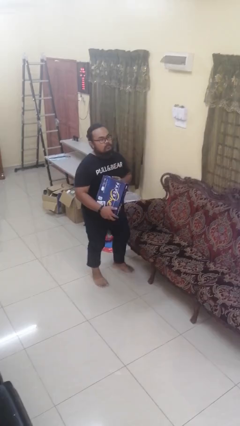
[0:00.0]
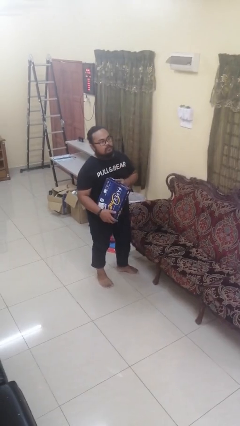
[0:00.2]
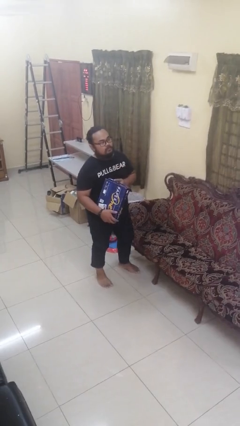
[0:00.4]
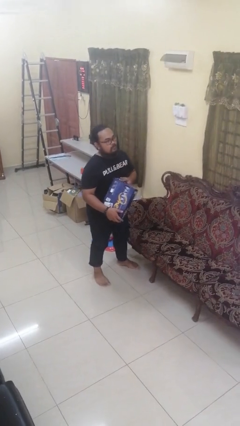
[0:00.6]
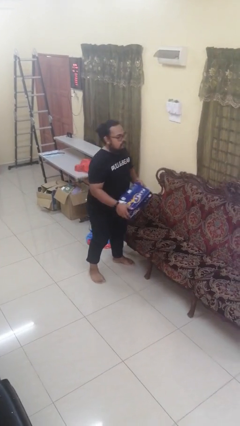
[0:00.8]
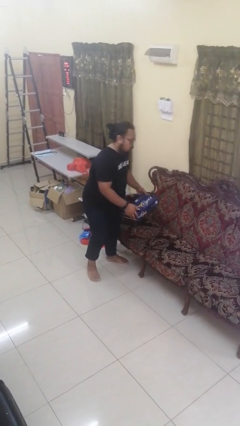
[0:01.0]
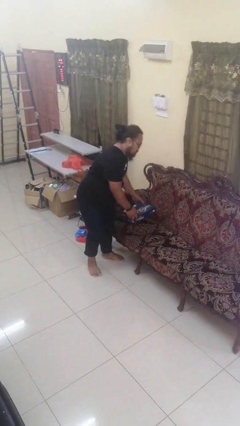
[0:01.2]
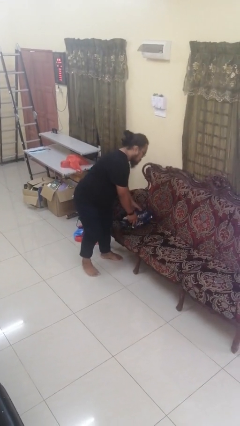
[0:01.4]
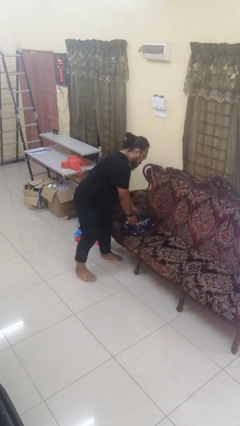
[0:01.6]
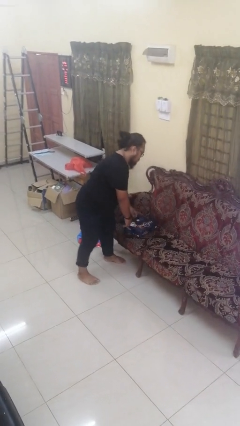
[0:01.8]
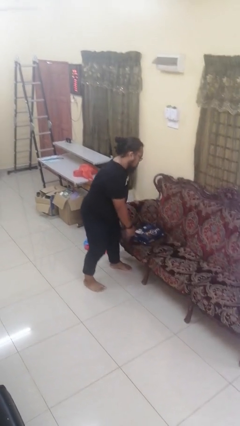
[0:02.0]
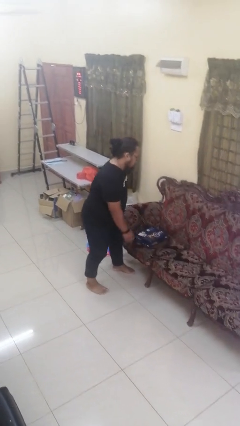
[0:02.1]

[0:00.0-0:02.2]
person puts down object on couch

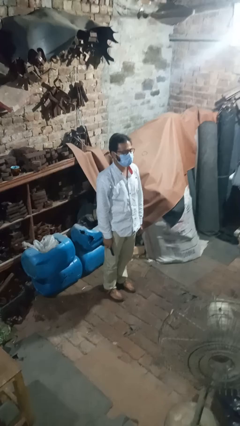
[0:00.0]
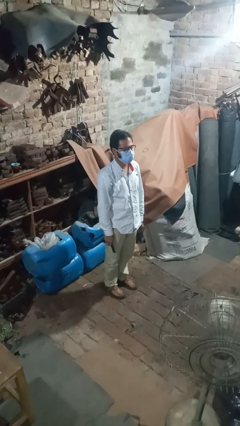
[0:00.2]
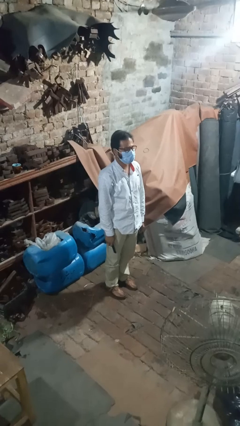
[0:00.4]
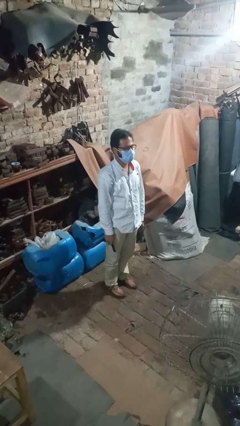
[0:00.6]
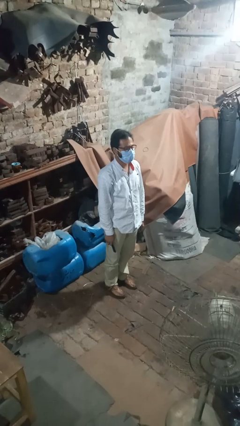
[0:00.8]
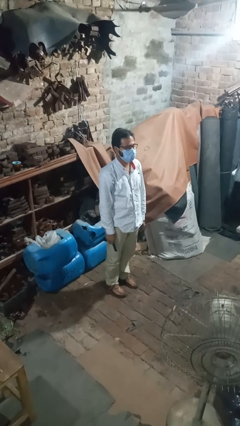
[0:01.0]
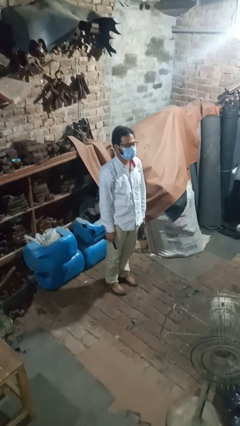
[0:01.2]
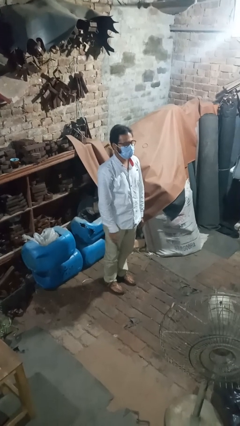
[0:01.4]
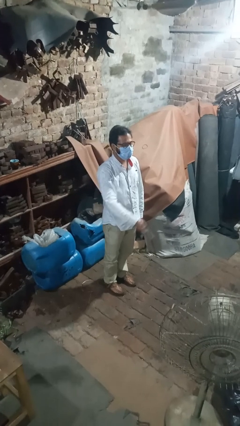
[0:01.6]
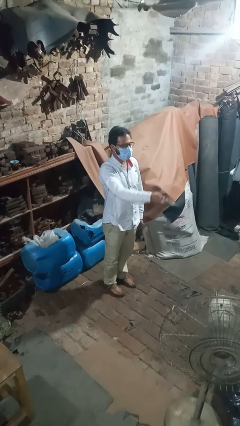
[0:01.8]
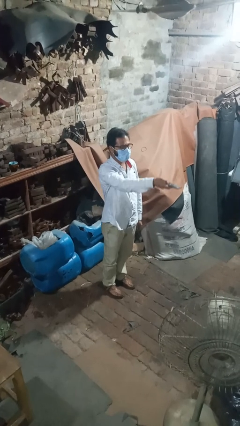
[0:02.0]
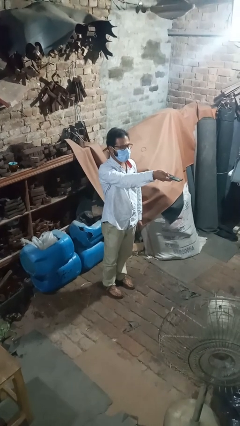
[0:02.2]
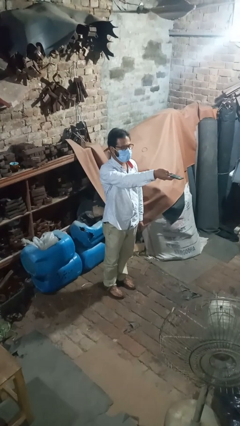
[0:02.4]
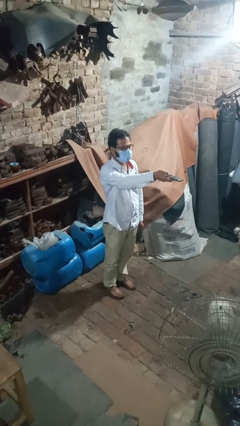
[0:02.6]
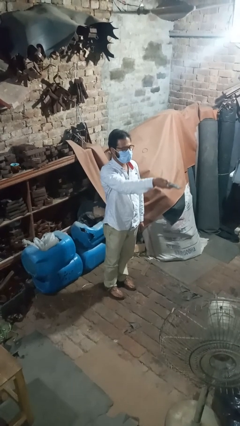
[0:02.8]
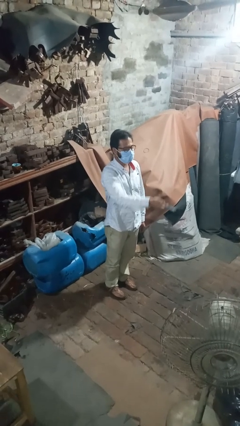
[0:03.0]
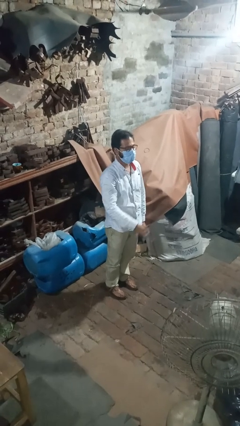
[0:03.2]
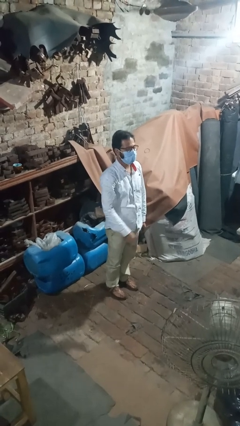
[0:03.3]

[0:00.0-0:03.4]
person uses television remote

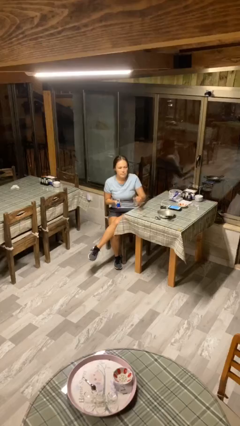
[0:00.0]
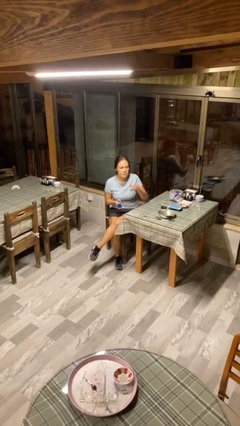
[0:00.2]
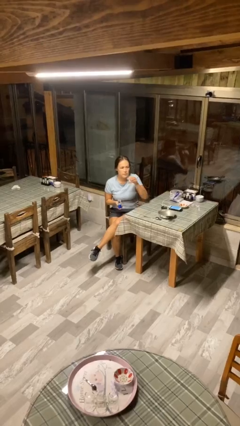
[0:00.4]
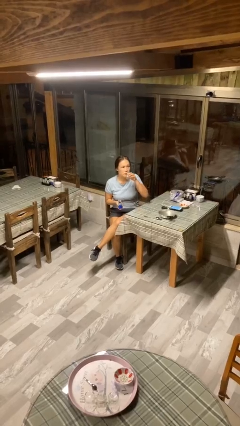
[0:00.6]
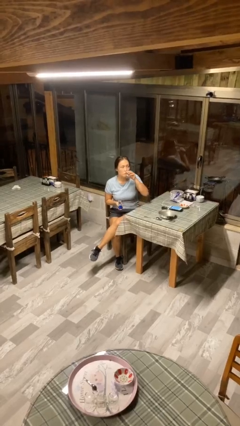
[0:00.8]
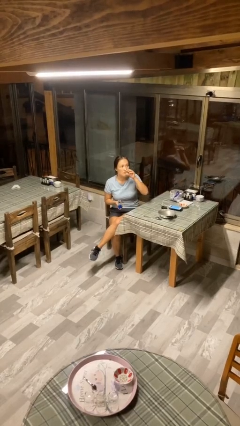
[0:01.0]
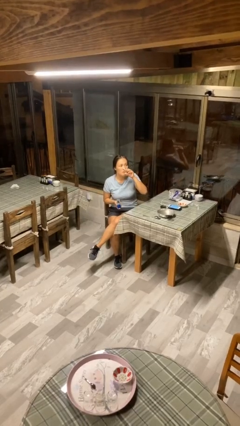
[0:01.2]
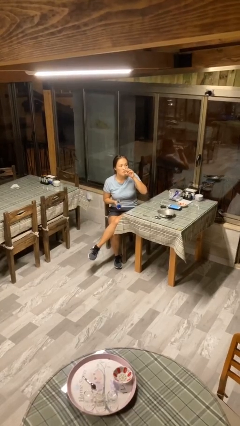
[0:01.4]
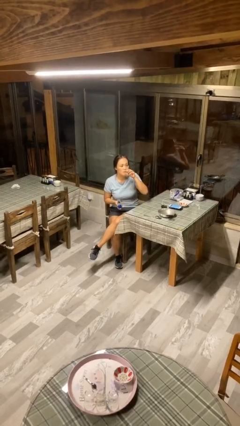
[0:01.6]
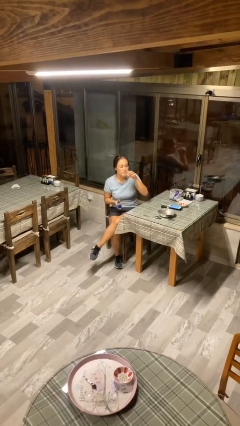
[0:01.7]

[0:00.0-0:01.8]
person drinks from cup

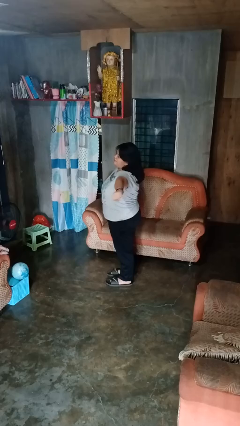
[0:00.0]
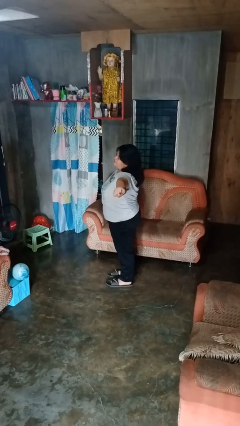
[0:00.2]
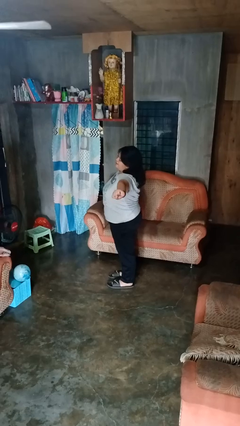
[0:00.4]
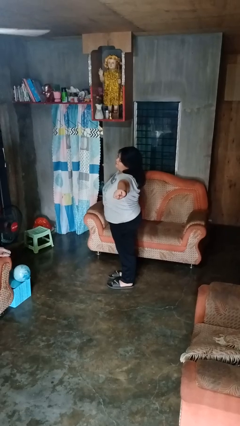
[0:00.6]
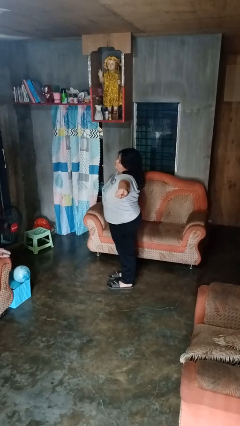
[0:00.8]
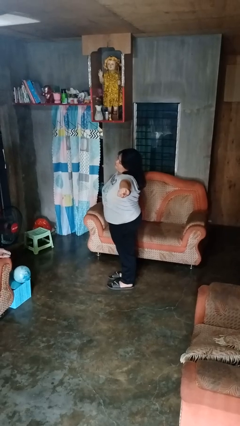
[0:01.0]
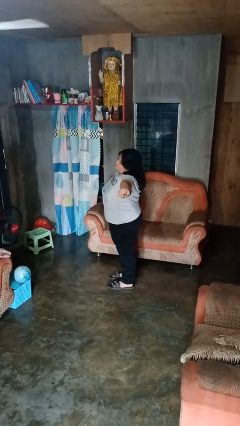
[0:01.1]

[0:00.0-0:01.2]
person stretches arms to side

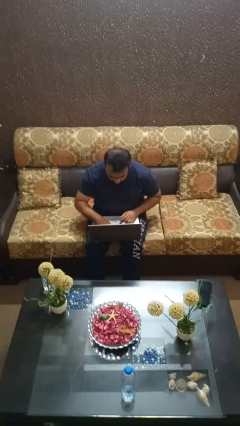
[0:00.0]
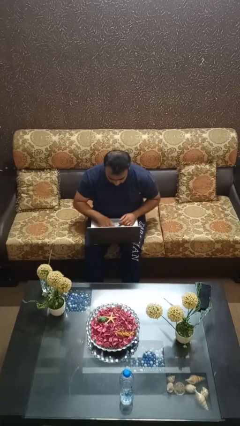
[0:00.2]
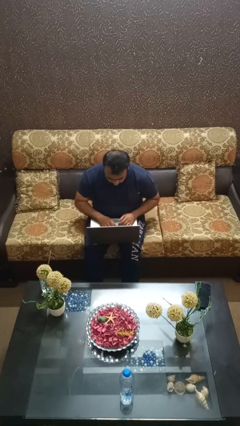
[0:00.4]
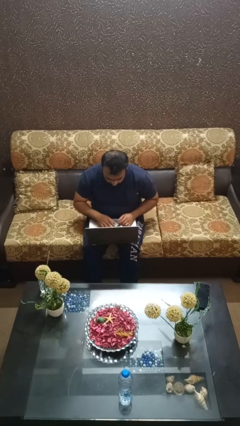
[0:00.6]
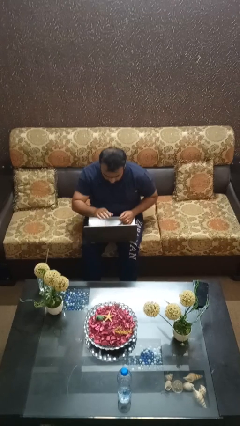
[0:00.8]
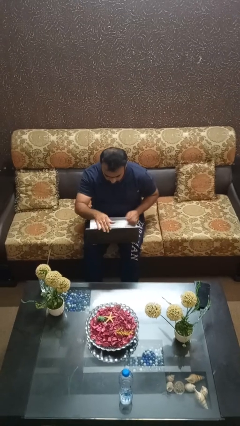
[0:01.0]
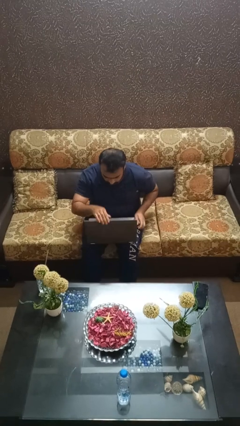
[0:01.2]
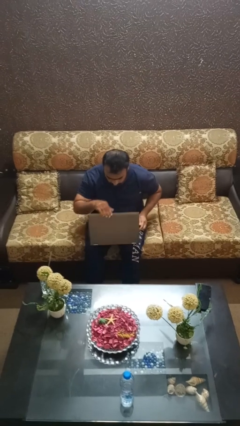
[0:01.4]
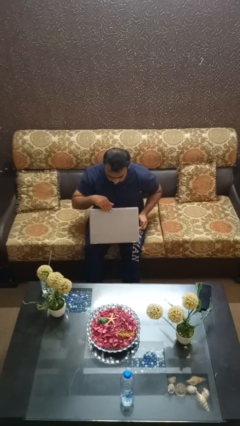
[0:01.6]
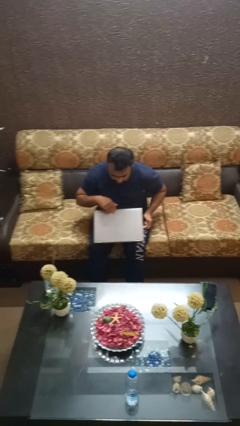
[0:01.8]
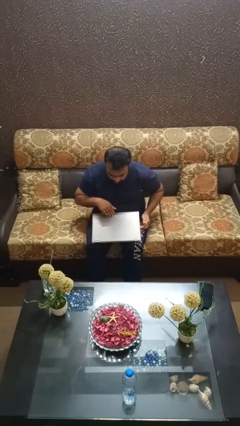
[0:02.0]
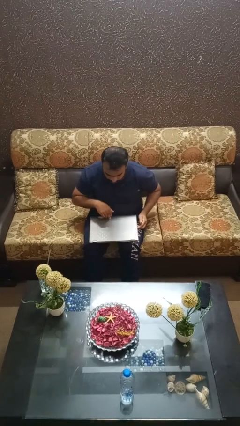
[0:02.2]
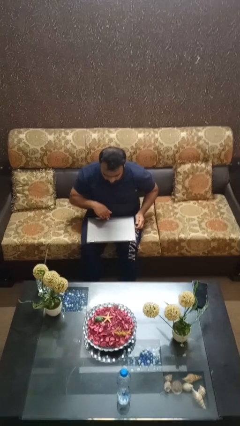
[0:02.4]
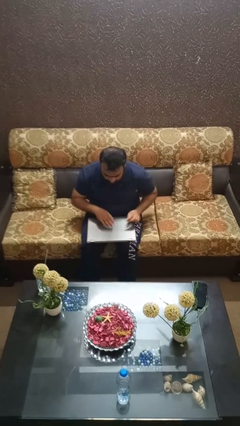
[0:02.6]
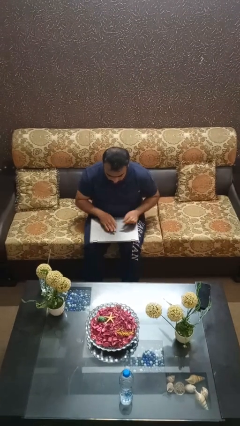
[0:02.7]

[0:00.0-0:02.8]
person closes laptop

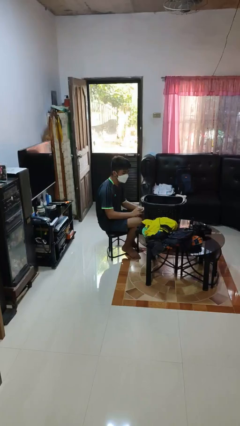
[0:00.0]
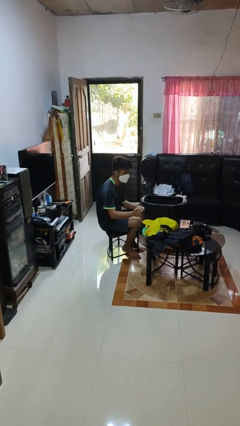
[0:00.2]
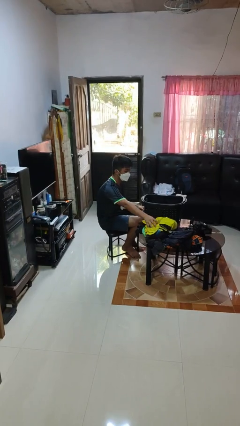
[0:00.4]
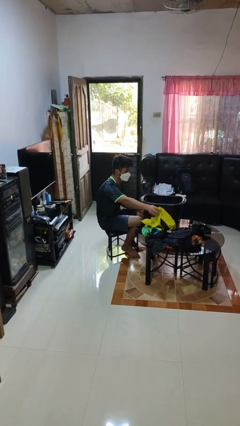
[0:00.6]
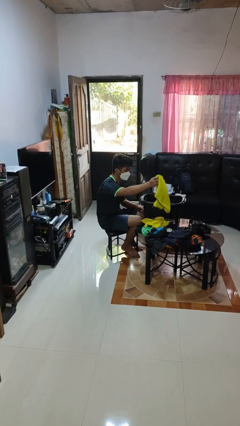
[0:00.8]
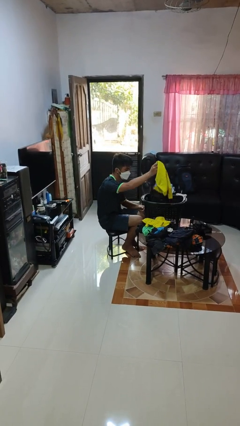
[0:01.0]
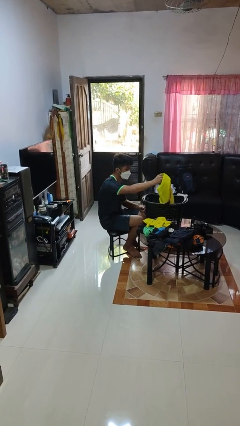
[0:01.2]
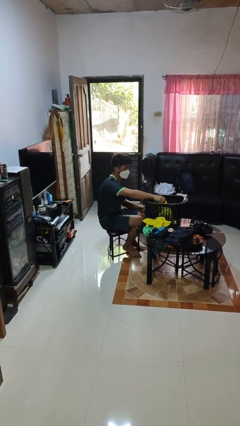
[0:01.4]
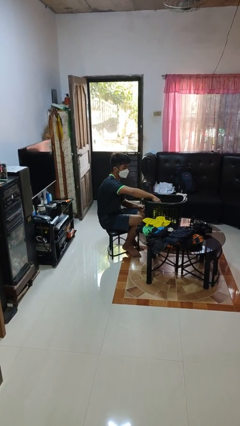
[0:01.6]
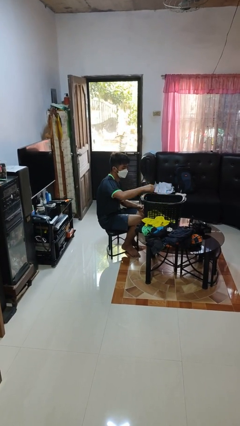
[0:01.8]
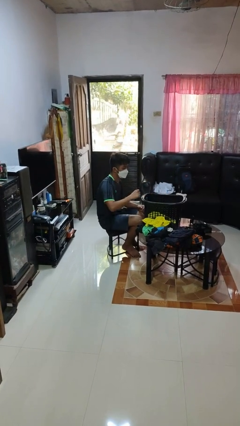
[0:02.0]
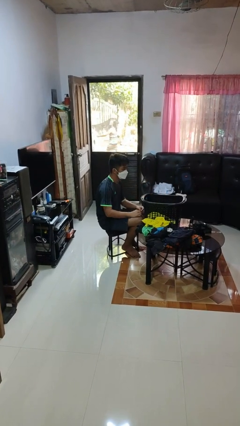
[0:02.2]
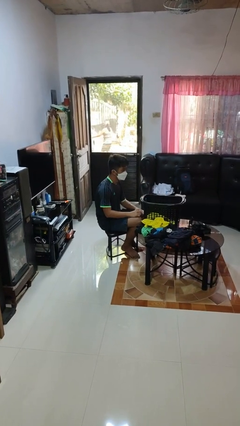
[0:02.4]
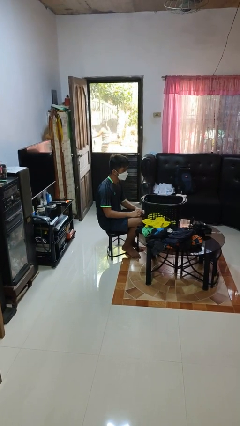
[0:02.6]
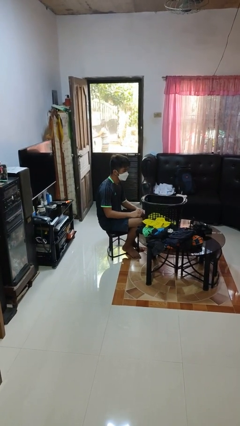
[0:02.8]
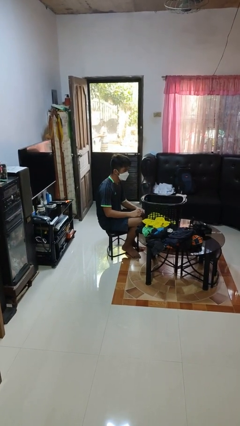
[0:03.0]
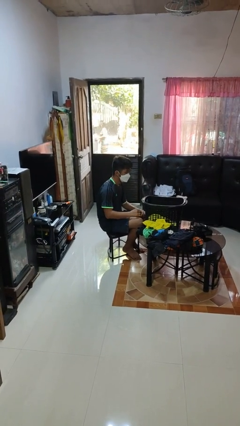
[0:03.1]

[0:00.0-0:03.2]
person puts object into basket

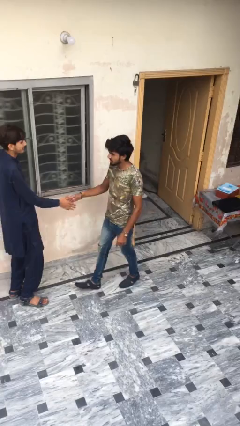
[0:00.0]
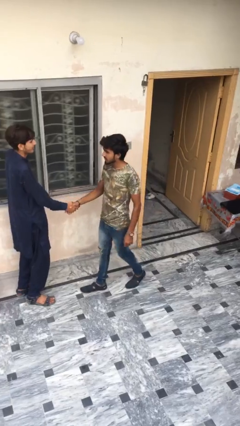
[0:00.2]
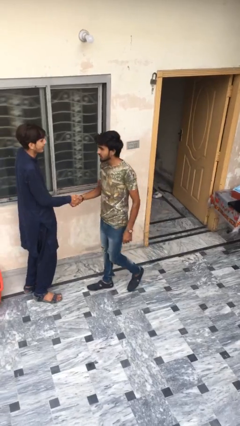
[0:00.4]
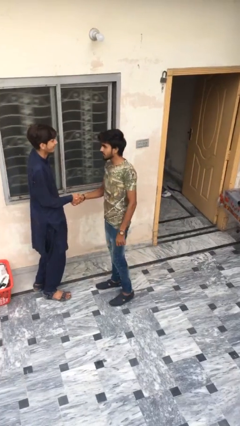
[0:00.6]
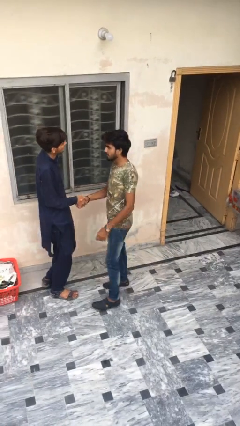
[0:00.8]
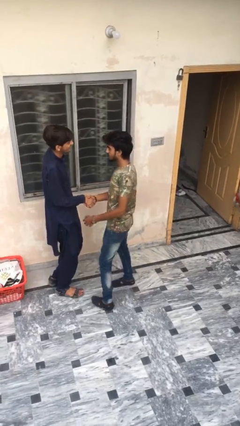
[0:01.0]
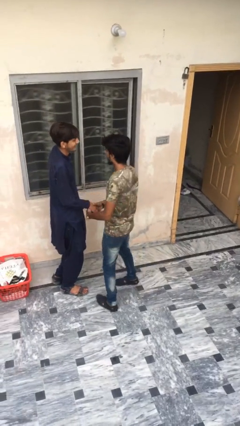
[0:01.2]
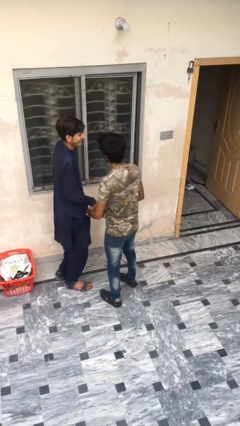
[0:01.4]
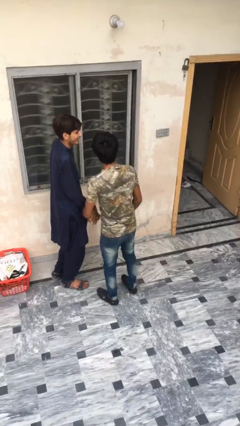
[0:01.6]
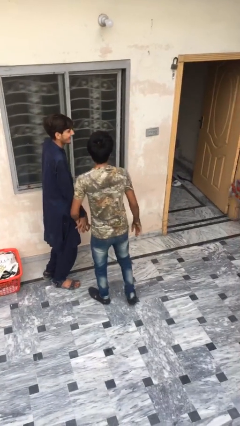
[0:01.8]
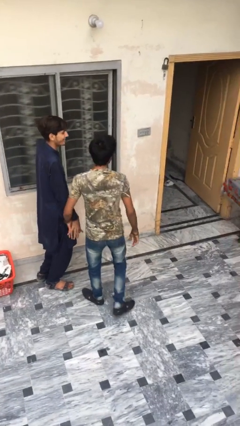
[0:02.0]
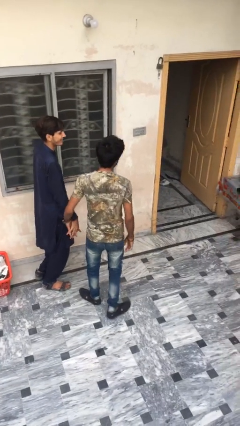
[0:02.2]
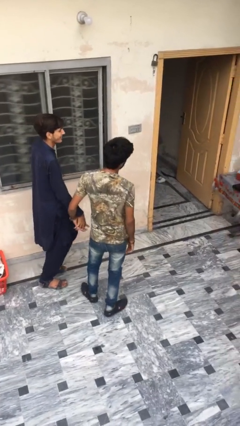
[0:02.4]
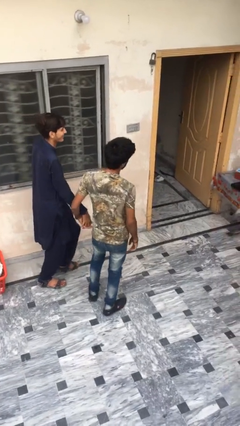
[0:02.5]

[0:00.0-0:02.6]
person shakes hand
